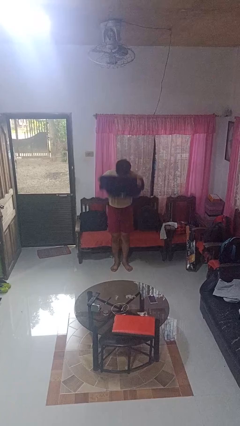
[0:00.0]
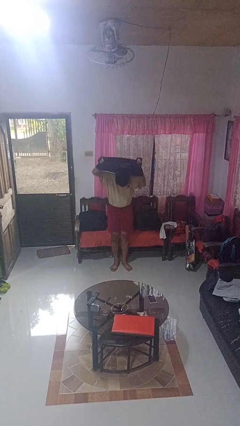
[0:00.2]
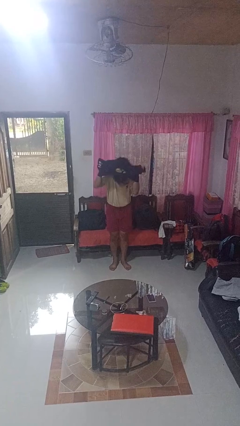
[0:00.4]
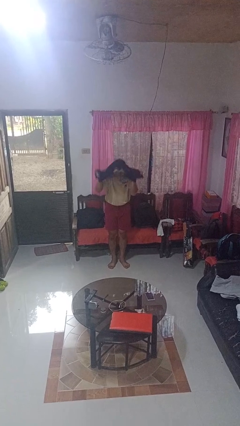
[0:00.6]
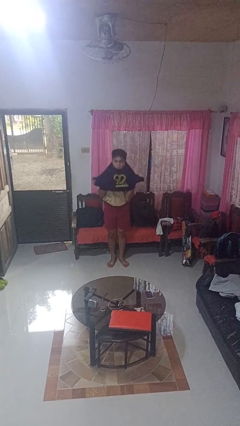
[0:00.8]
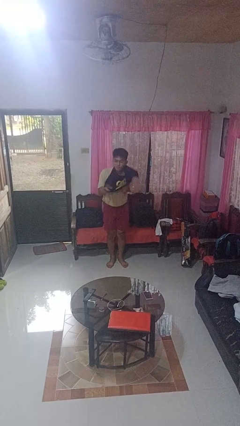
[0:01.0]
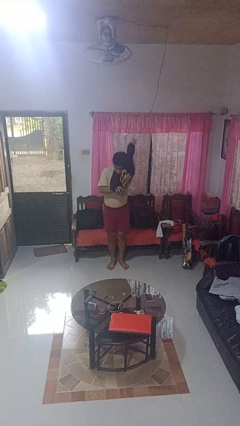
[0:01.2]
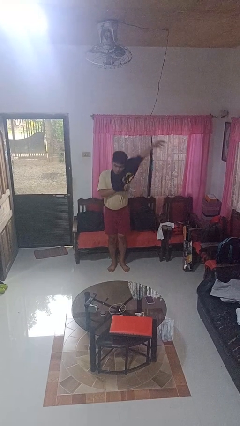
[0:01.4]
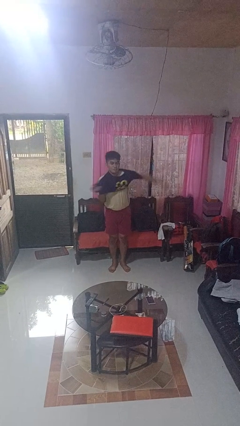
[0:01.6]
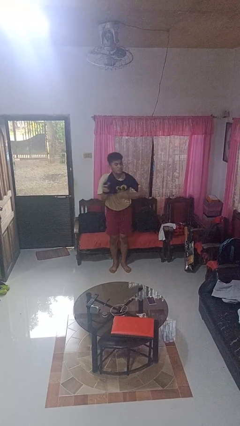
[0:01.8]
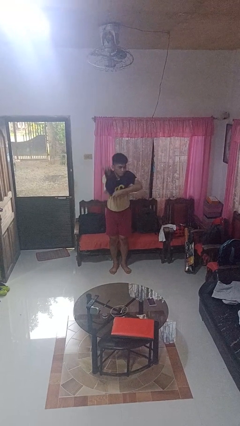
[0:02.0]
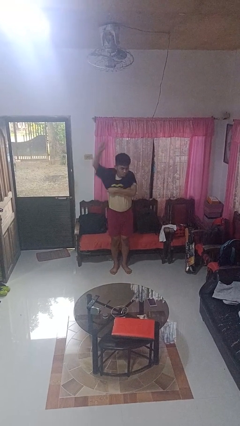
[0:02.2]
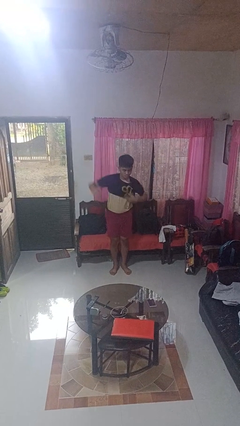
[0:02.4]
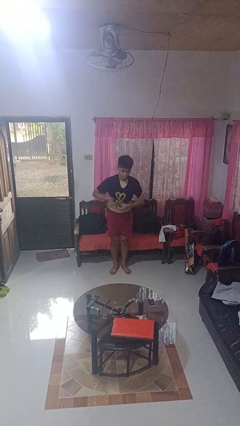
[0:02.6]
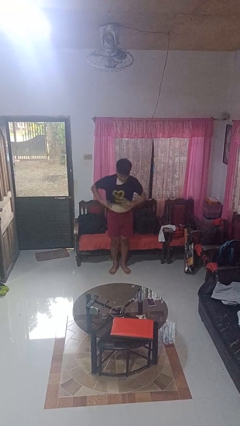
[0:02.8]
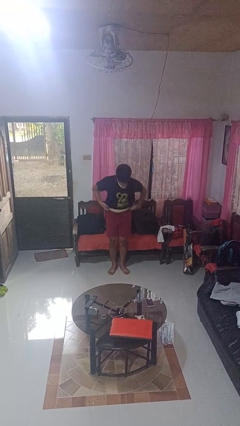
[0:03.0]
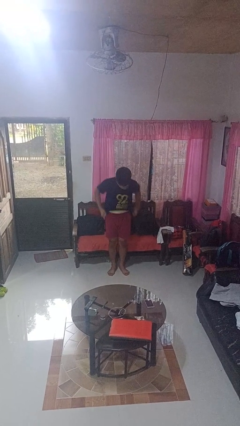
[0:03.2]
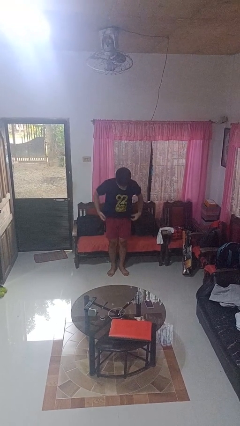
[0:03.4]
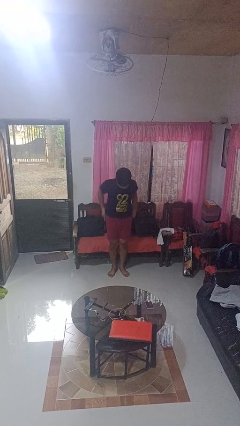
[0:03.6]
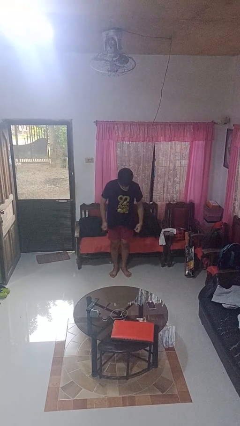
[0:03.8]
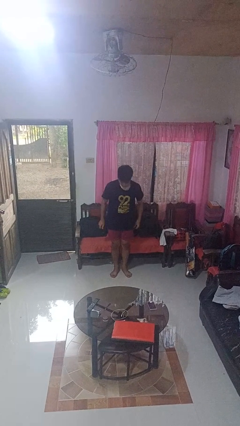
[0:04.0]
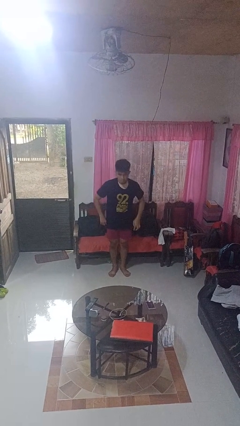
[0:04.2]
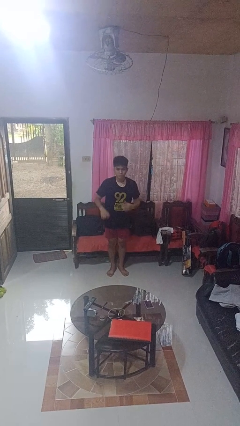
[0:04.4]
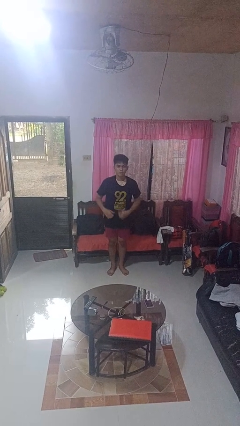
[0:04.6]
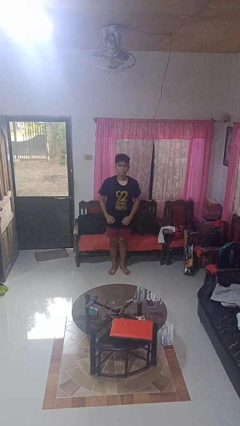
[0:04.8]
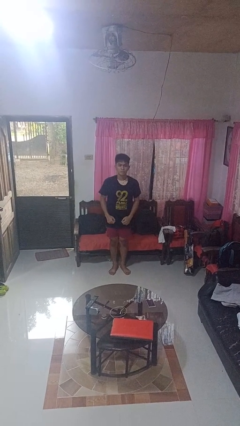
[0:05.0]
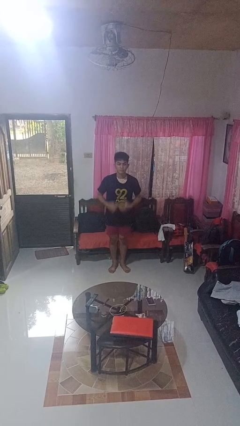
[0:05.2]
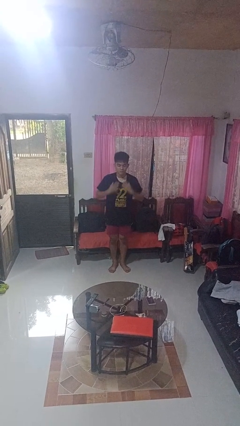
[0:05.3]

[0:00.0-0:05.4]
person puts on shirt

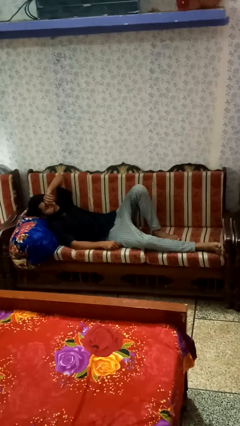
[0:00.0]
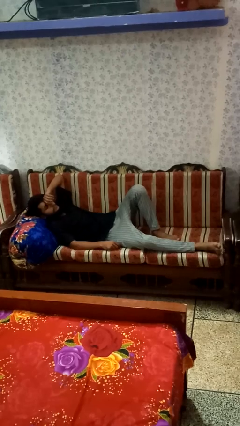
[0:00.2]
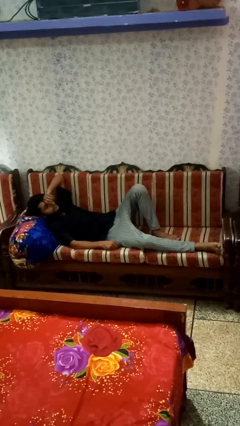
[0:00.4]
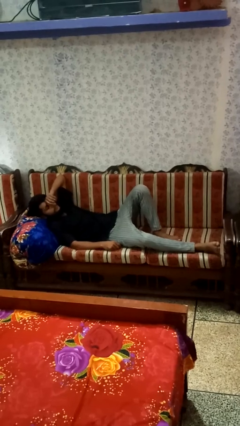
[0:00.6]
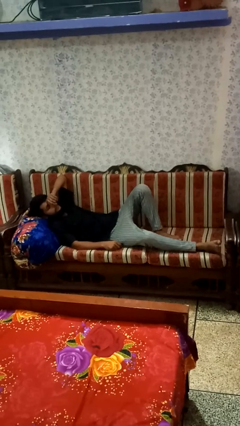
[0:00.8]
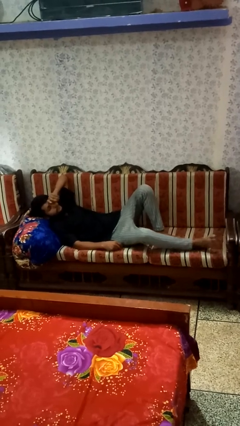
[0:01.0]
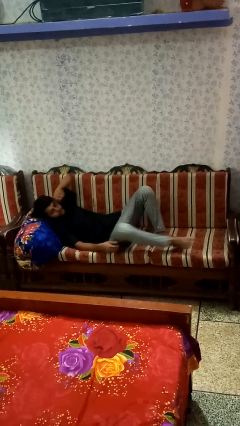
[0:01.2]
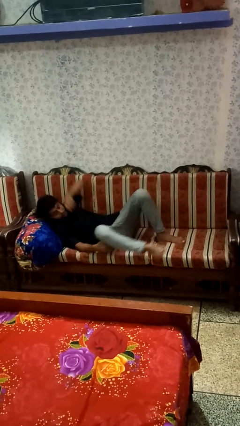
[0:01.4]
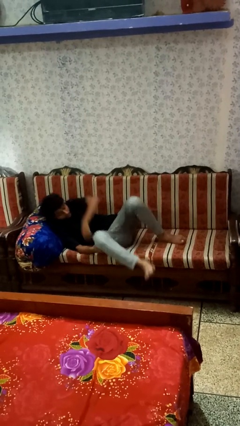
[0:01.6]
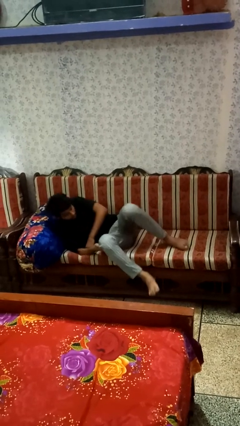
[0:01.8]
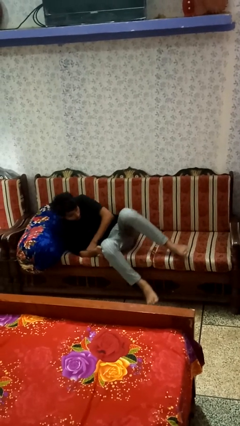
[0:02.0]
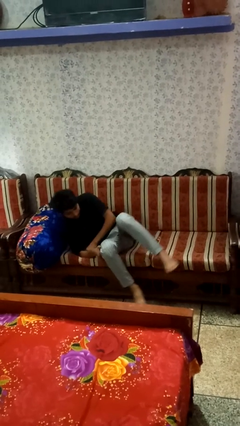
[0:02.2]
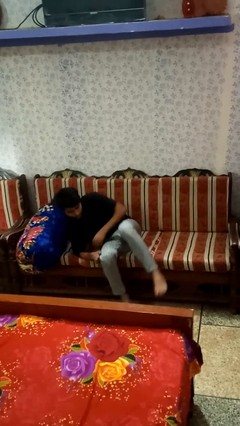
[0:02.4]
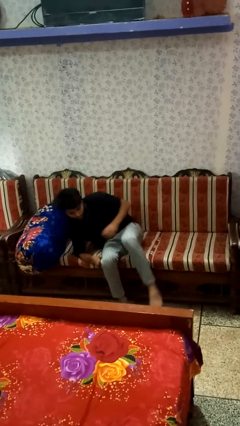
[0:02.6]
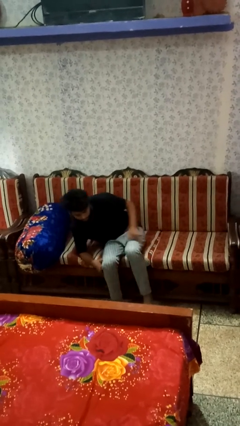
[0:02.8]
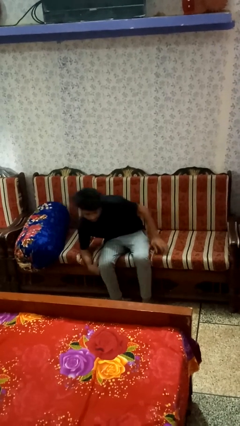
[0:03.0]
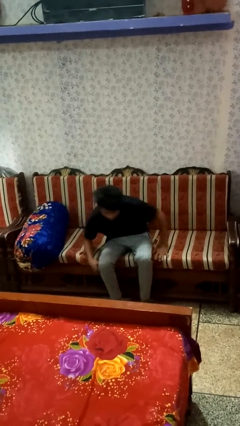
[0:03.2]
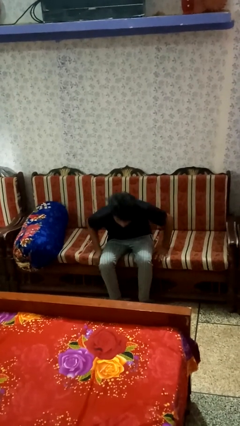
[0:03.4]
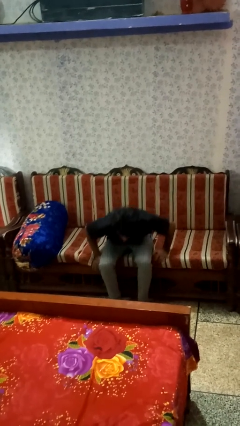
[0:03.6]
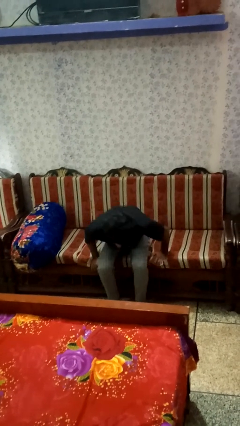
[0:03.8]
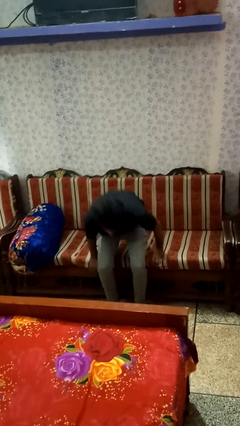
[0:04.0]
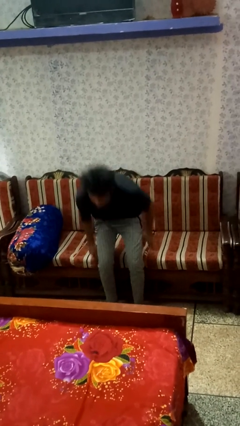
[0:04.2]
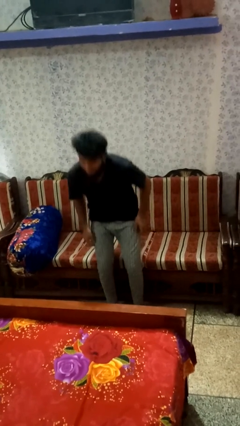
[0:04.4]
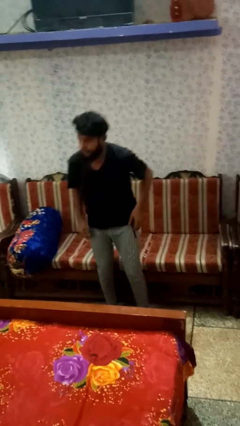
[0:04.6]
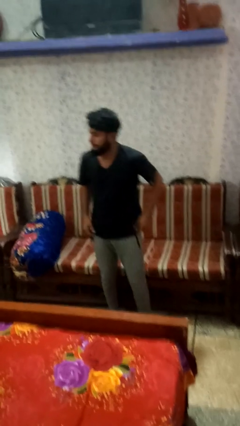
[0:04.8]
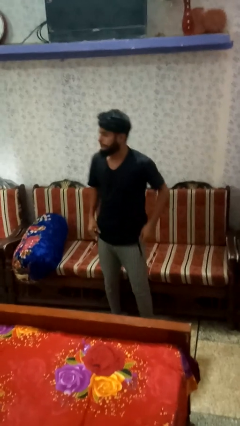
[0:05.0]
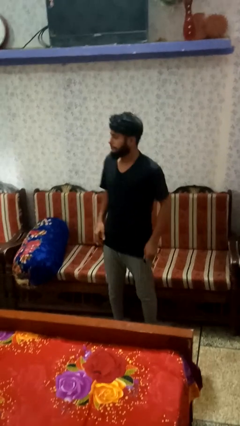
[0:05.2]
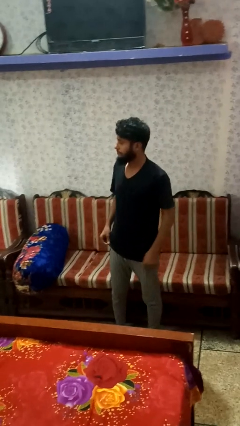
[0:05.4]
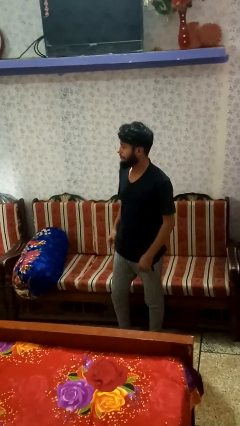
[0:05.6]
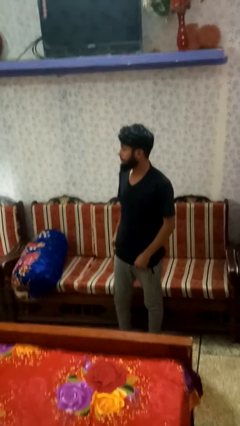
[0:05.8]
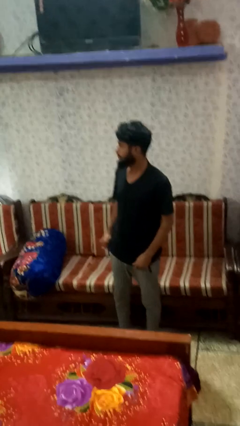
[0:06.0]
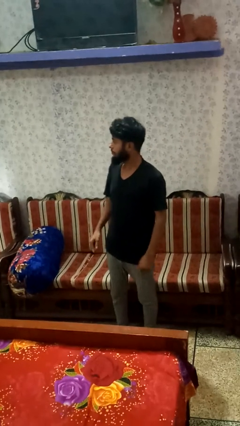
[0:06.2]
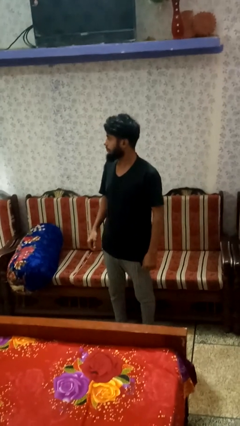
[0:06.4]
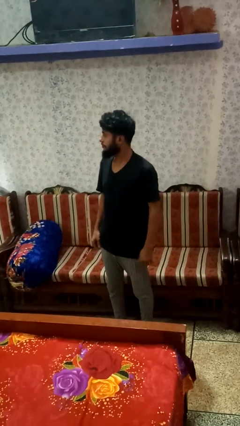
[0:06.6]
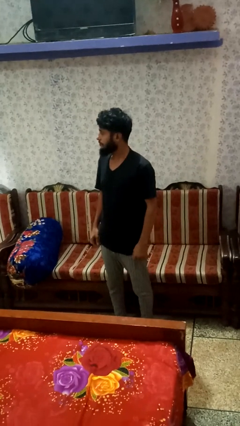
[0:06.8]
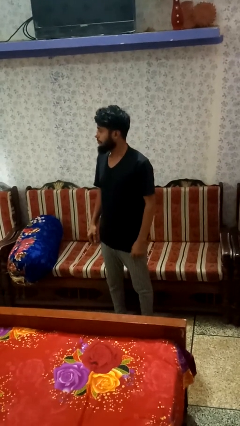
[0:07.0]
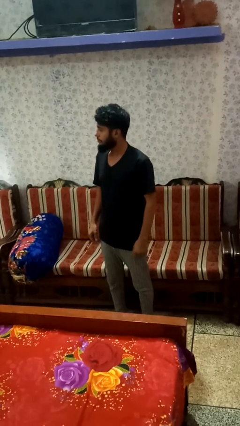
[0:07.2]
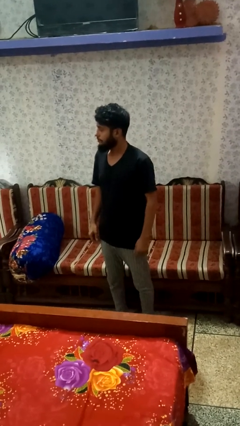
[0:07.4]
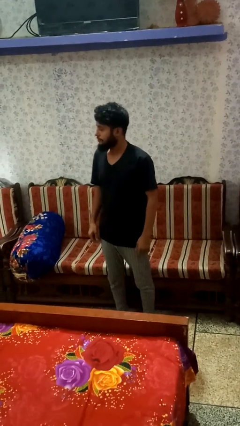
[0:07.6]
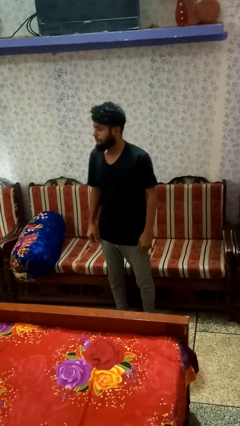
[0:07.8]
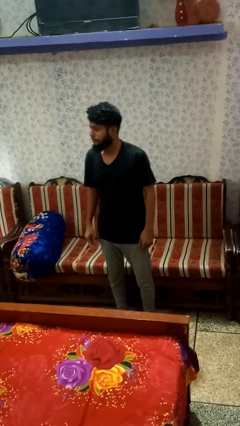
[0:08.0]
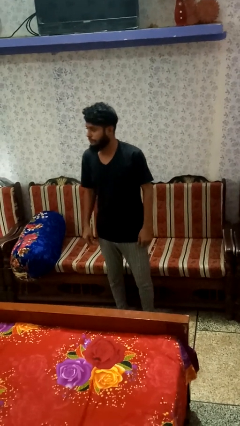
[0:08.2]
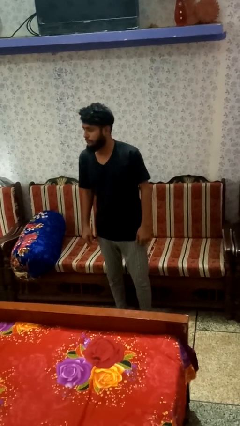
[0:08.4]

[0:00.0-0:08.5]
person stands up

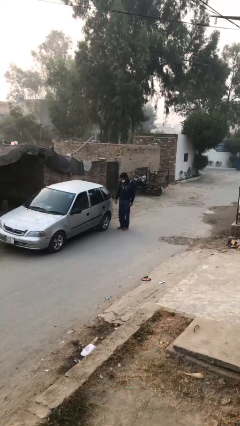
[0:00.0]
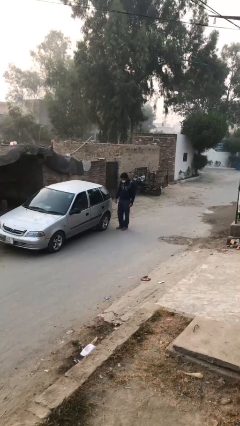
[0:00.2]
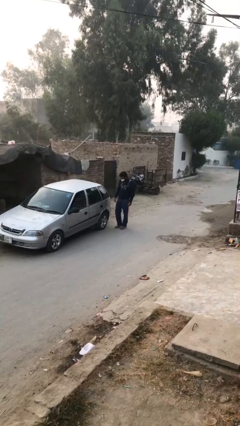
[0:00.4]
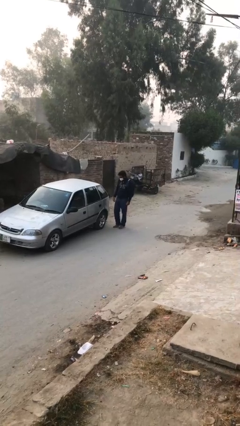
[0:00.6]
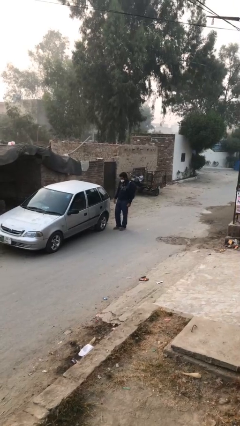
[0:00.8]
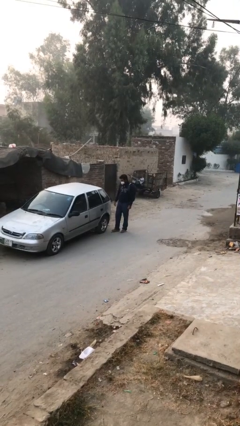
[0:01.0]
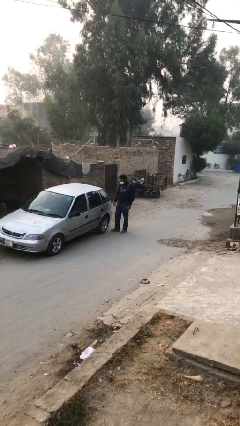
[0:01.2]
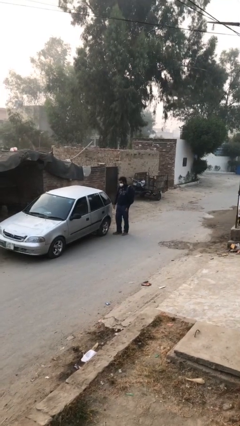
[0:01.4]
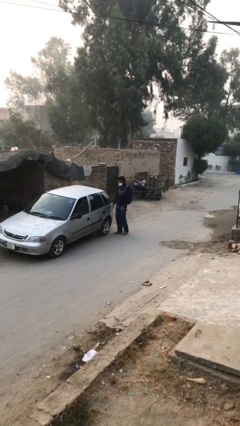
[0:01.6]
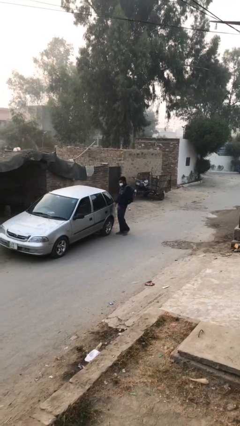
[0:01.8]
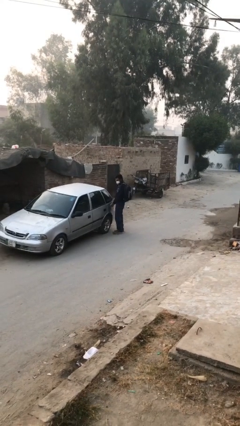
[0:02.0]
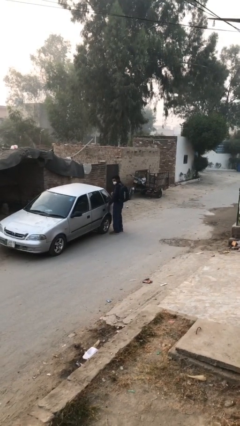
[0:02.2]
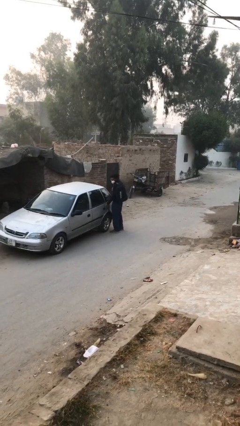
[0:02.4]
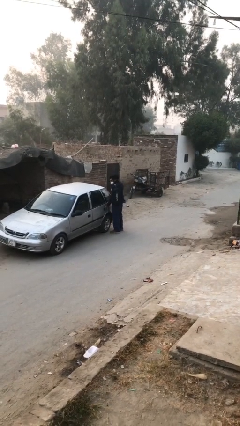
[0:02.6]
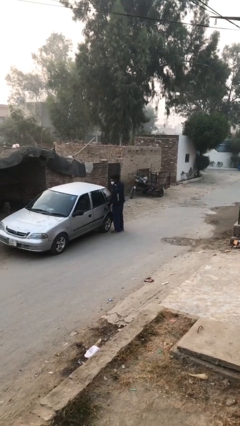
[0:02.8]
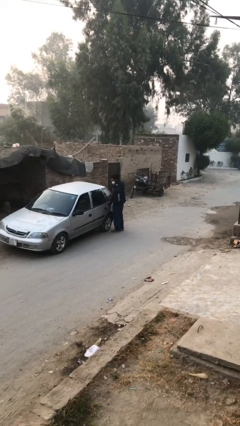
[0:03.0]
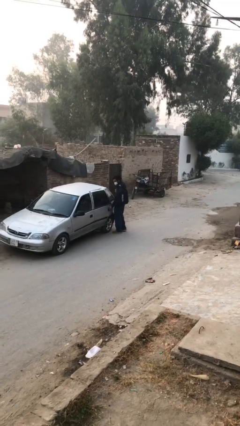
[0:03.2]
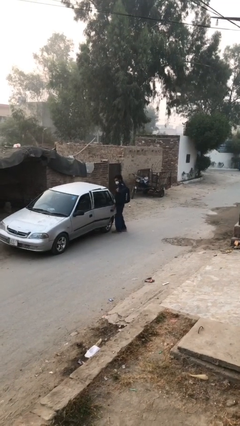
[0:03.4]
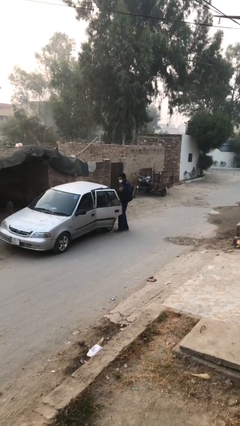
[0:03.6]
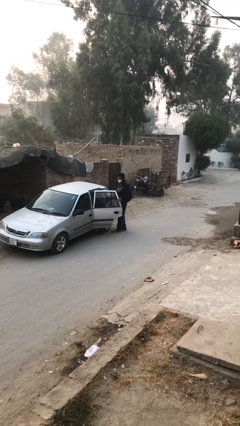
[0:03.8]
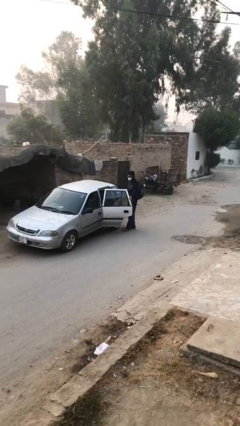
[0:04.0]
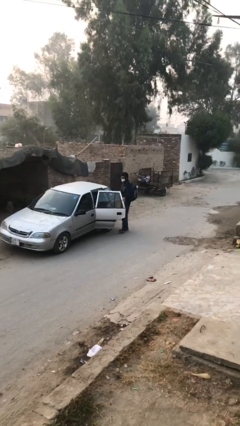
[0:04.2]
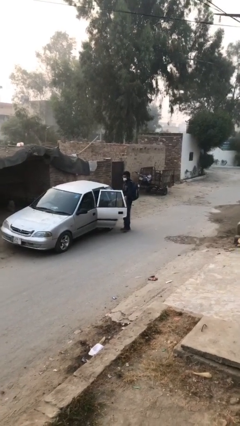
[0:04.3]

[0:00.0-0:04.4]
person opens car door
